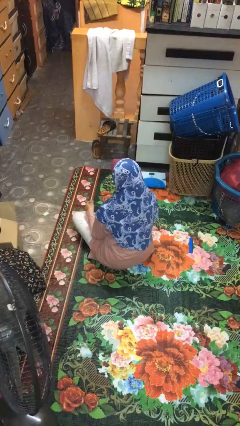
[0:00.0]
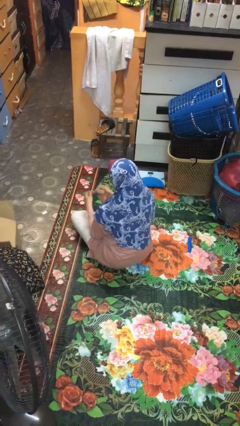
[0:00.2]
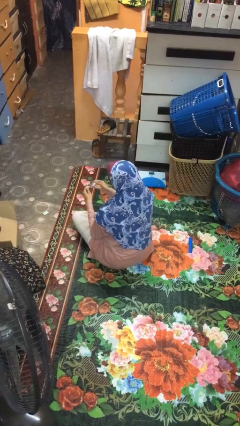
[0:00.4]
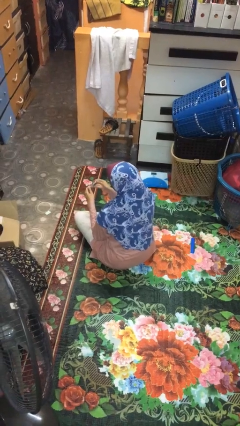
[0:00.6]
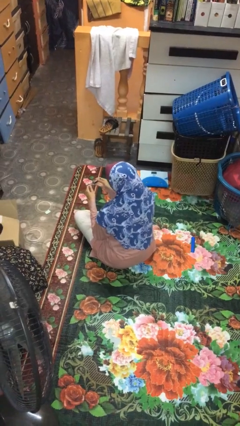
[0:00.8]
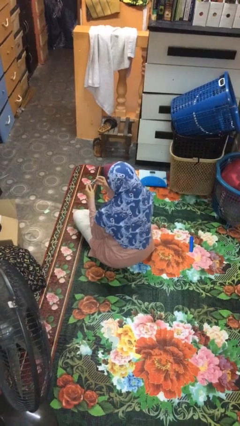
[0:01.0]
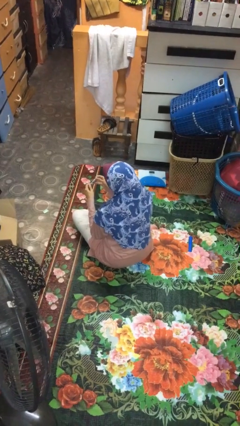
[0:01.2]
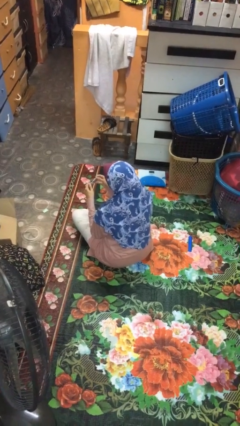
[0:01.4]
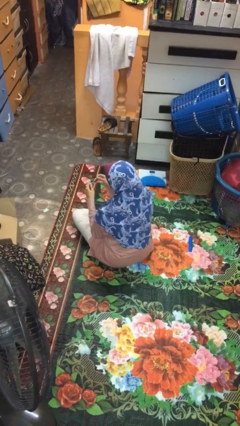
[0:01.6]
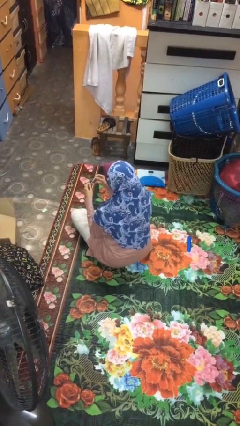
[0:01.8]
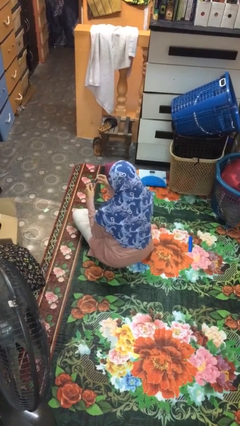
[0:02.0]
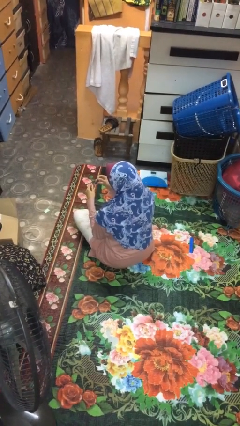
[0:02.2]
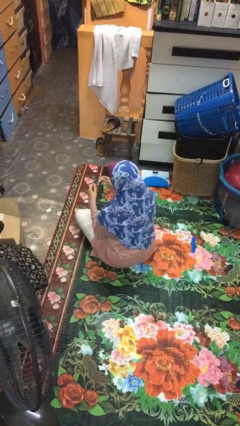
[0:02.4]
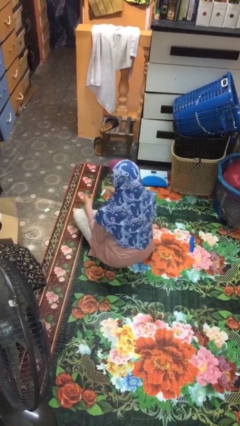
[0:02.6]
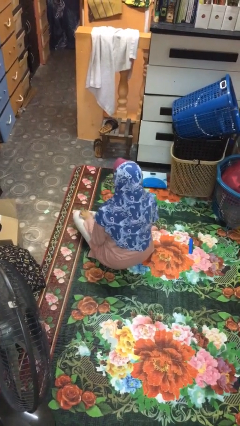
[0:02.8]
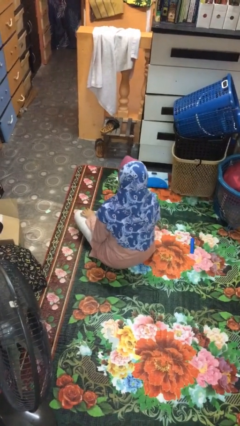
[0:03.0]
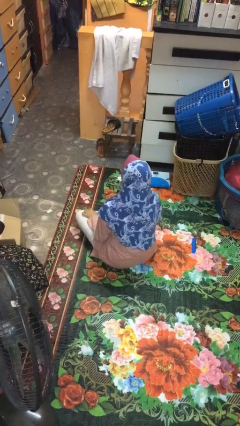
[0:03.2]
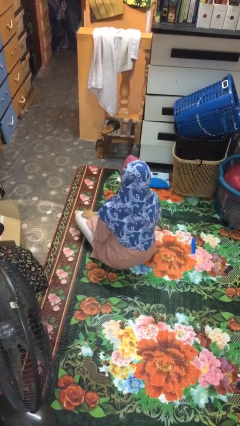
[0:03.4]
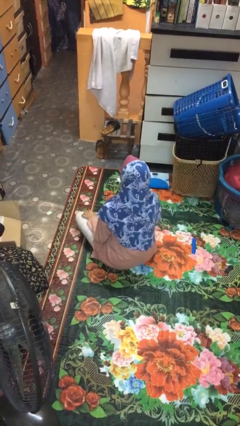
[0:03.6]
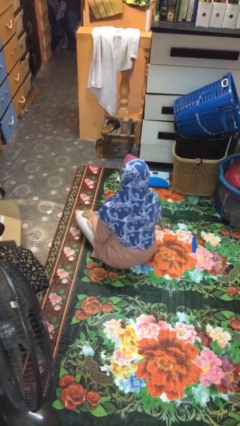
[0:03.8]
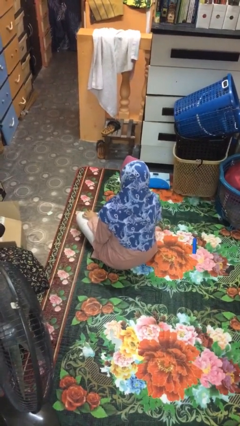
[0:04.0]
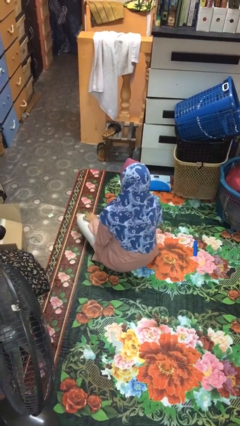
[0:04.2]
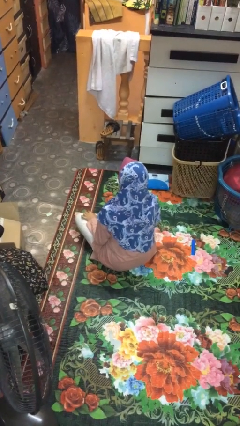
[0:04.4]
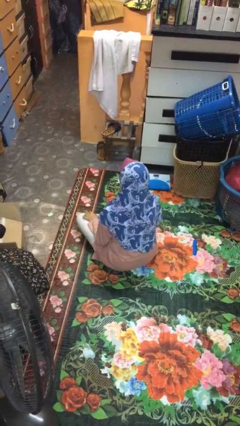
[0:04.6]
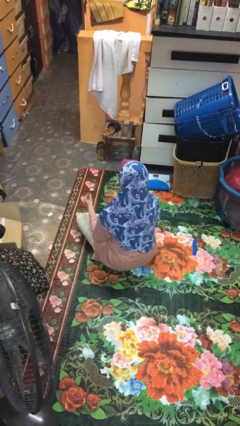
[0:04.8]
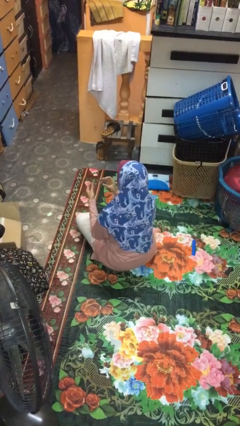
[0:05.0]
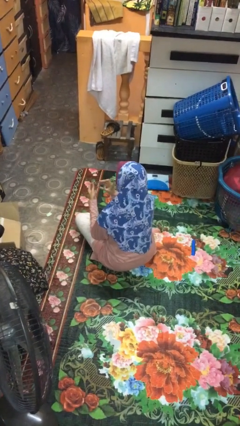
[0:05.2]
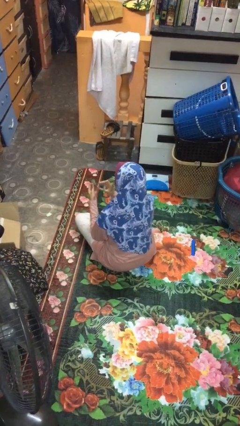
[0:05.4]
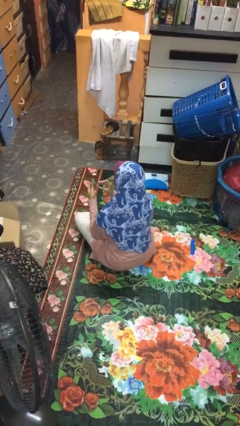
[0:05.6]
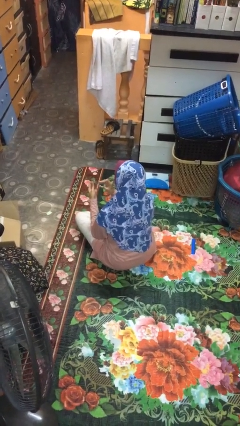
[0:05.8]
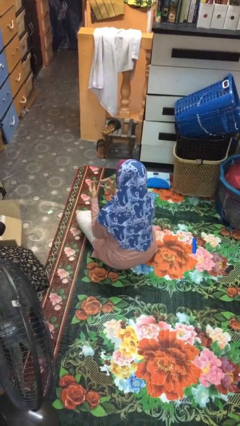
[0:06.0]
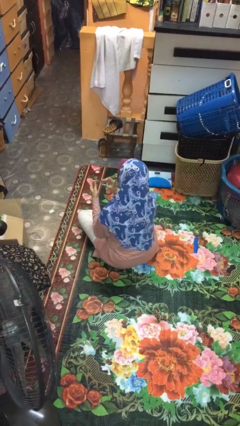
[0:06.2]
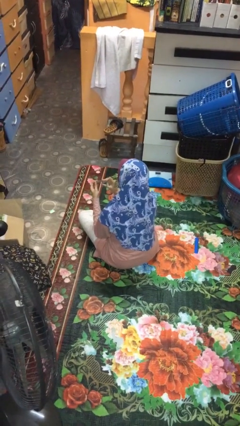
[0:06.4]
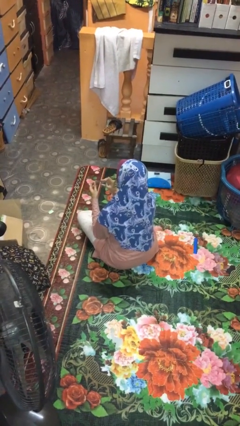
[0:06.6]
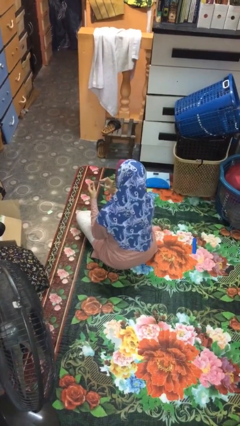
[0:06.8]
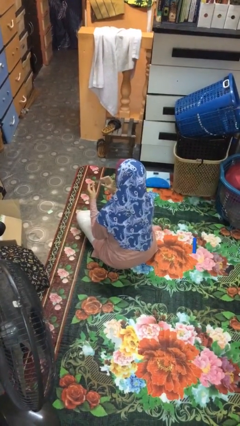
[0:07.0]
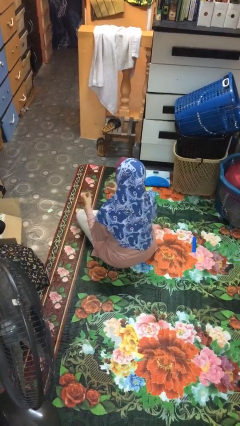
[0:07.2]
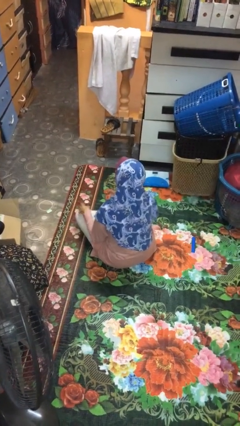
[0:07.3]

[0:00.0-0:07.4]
person clips fingernails

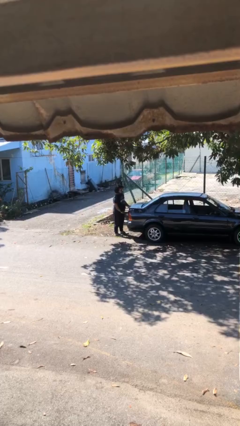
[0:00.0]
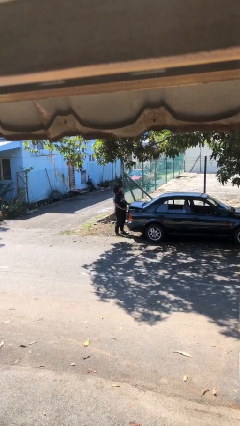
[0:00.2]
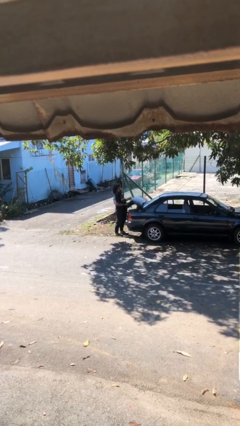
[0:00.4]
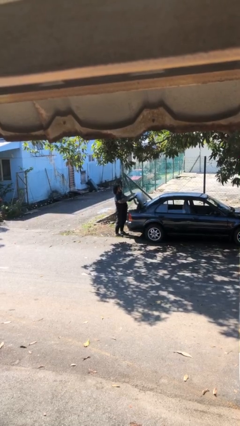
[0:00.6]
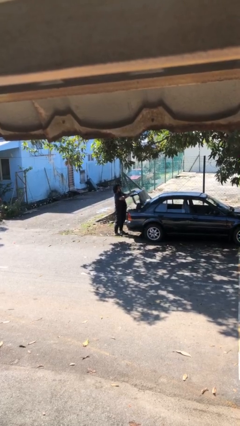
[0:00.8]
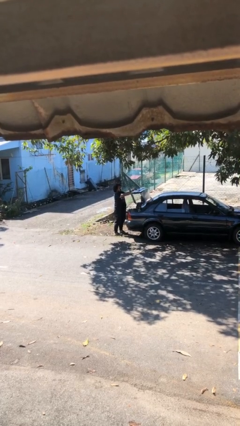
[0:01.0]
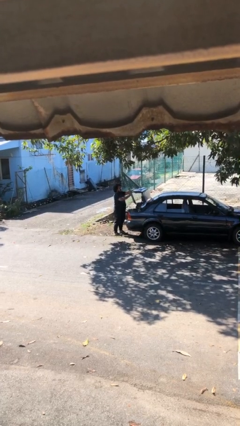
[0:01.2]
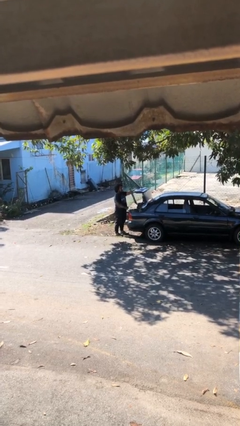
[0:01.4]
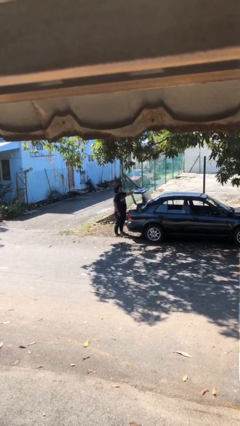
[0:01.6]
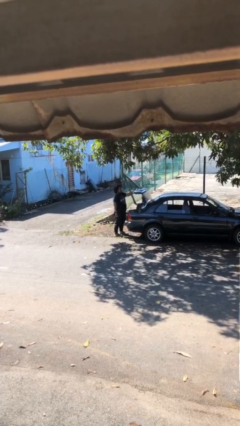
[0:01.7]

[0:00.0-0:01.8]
person opens car trunk

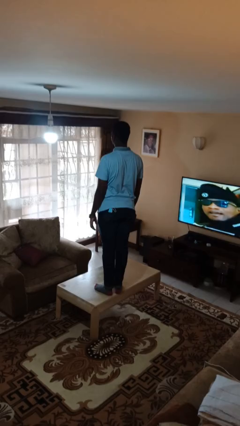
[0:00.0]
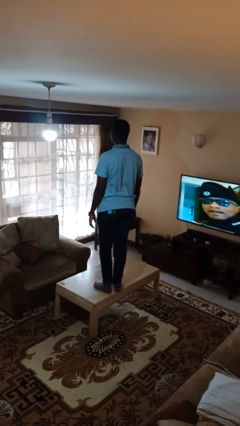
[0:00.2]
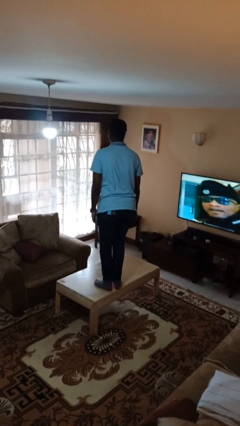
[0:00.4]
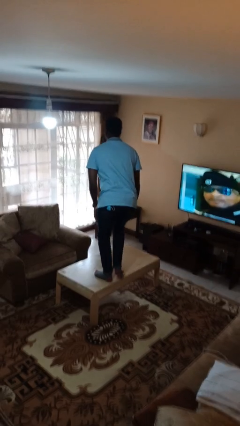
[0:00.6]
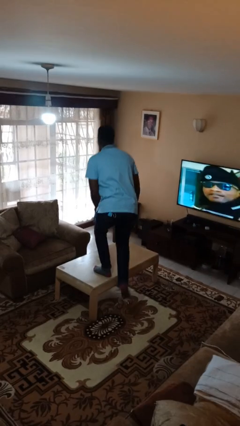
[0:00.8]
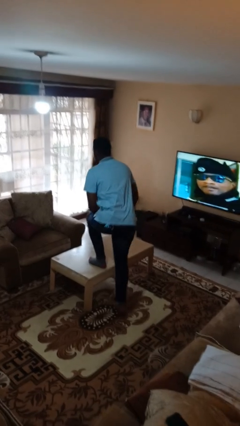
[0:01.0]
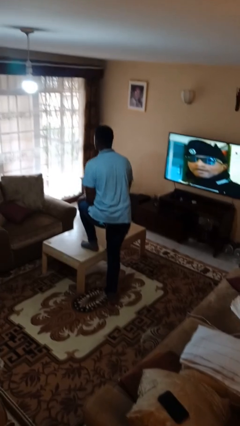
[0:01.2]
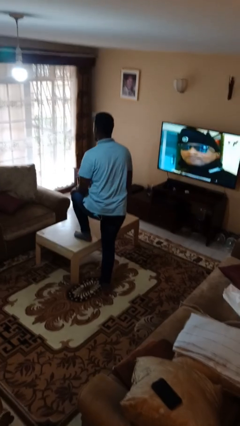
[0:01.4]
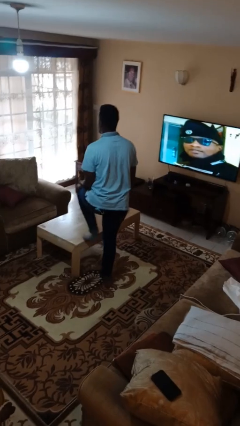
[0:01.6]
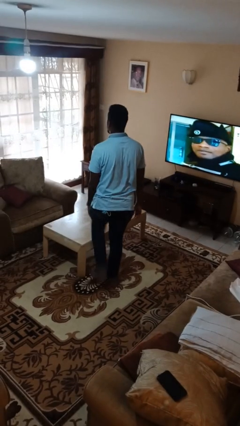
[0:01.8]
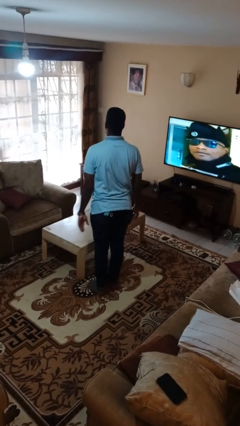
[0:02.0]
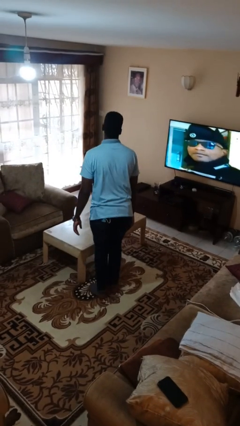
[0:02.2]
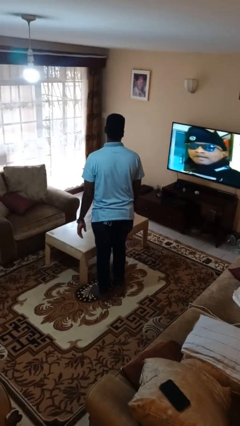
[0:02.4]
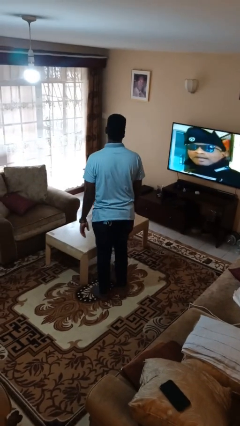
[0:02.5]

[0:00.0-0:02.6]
person climbs off table

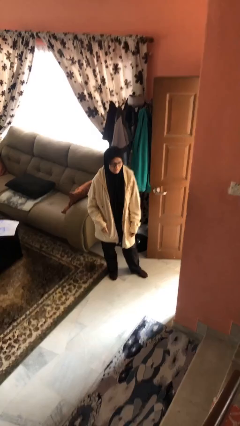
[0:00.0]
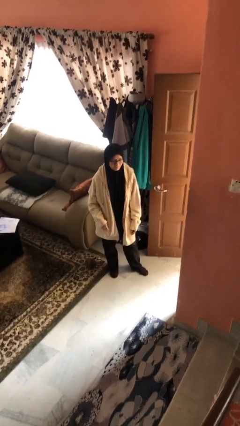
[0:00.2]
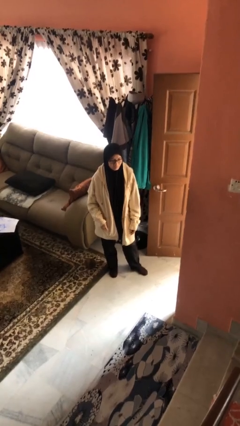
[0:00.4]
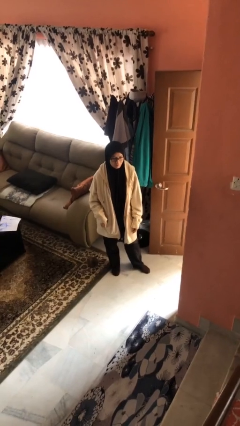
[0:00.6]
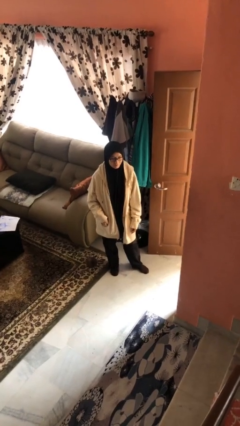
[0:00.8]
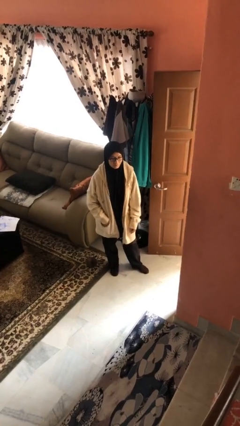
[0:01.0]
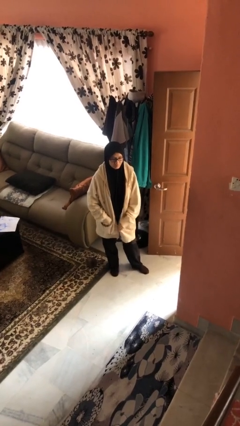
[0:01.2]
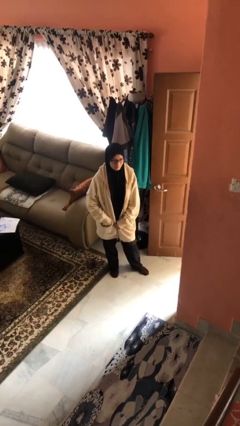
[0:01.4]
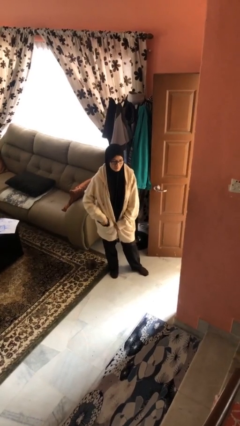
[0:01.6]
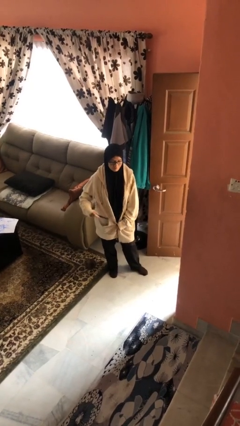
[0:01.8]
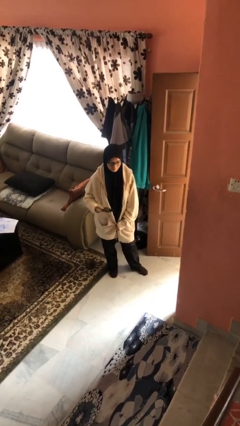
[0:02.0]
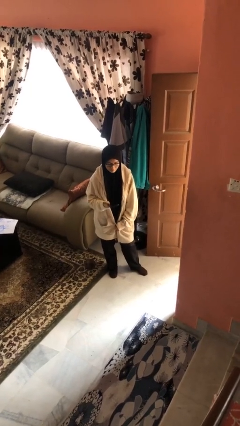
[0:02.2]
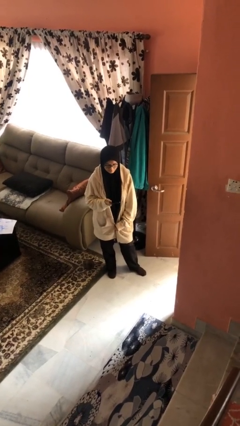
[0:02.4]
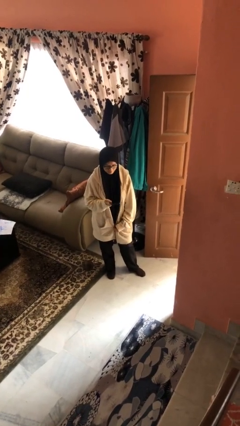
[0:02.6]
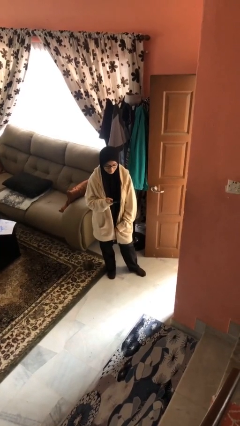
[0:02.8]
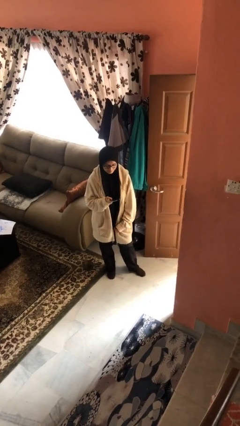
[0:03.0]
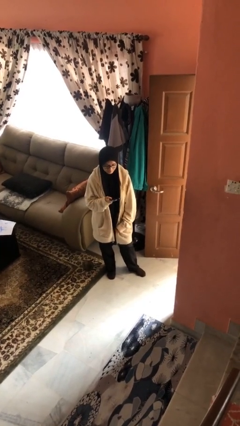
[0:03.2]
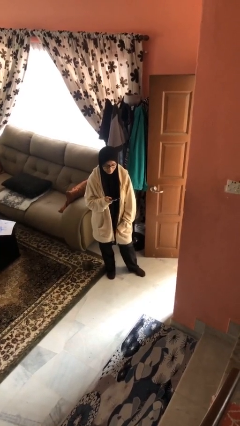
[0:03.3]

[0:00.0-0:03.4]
person takes phone from pocket

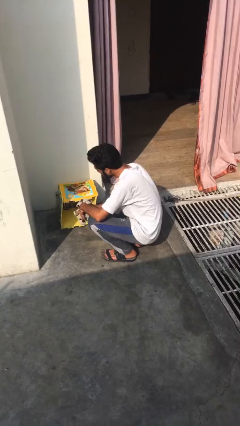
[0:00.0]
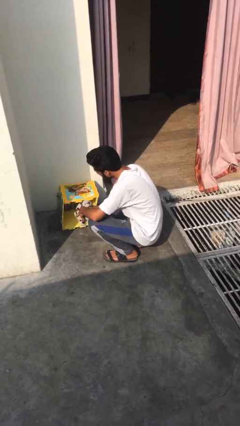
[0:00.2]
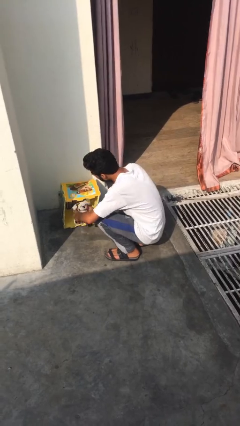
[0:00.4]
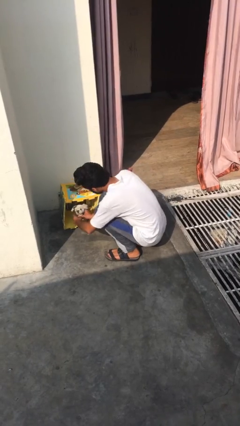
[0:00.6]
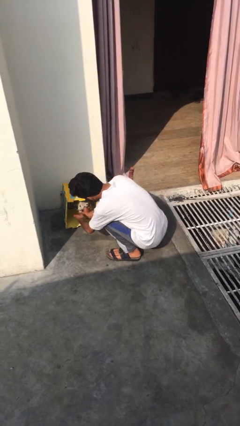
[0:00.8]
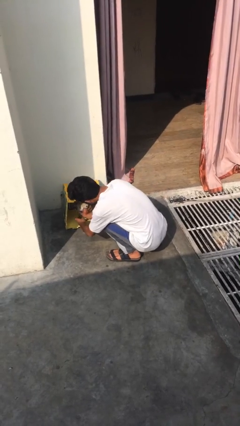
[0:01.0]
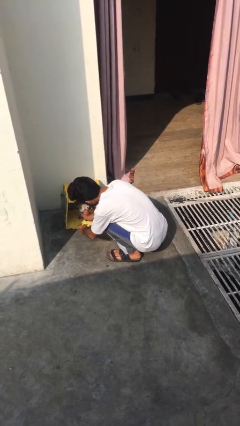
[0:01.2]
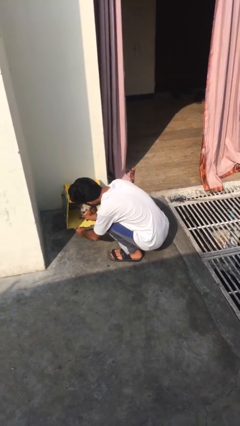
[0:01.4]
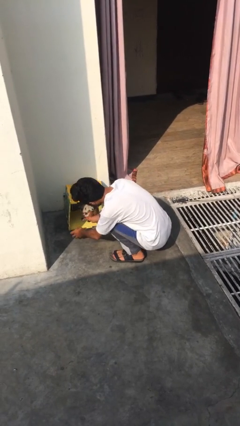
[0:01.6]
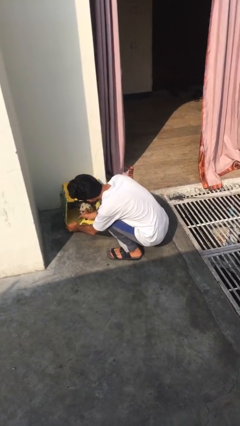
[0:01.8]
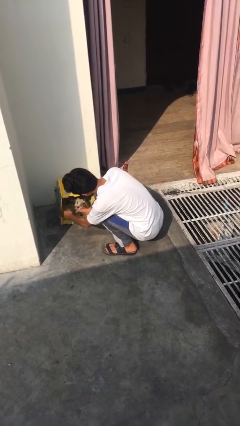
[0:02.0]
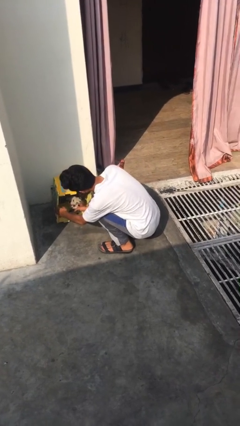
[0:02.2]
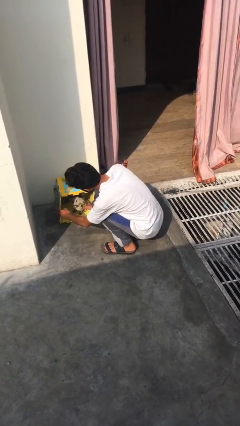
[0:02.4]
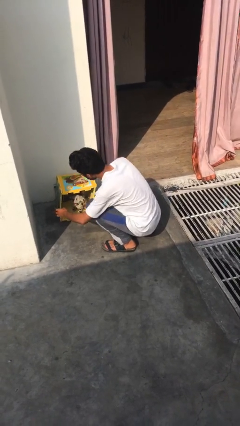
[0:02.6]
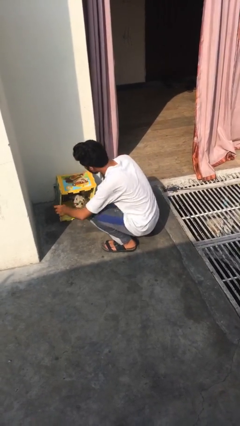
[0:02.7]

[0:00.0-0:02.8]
person crates dog
